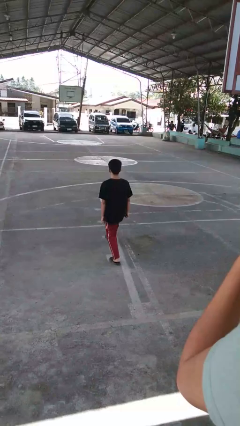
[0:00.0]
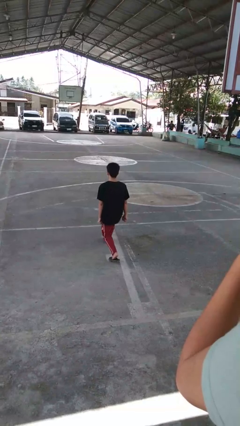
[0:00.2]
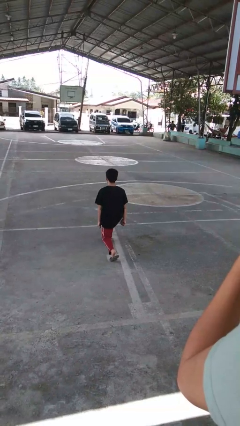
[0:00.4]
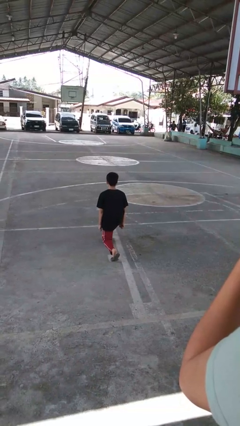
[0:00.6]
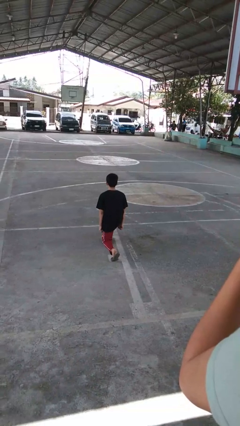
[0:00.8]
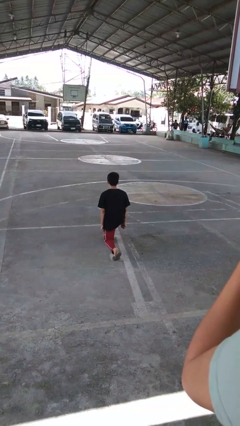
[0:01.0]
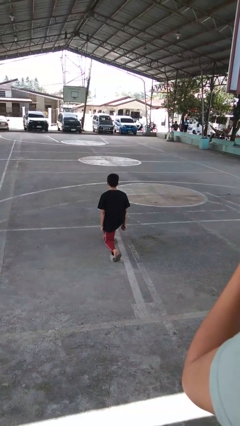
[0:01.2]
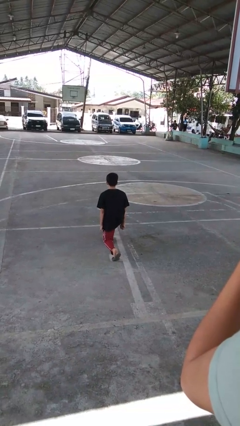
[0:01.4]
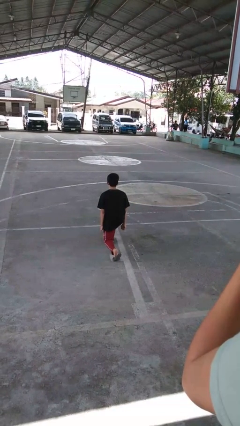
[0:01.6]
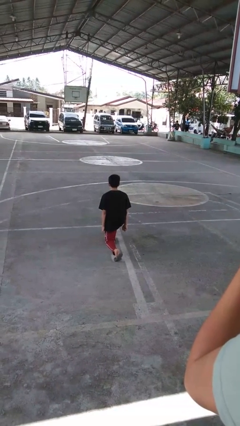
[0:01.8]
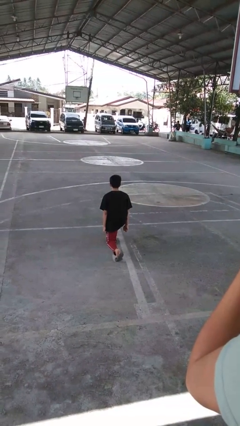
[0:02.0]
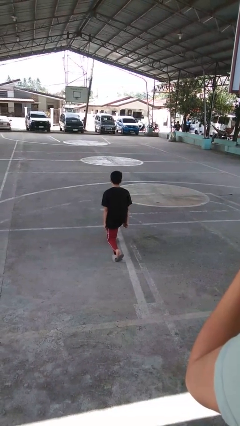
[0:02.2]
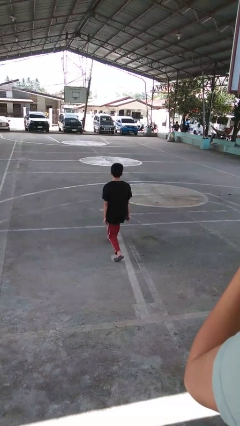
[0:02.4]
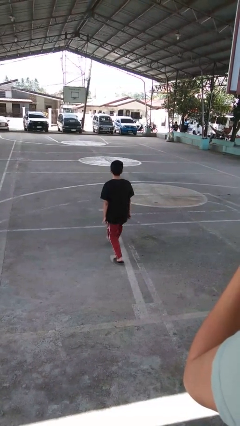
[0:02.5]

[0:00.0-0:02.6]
person exercises with lunges

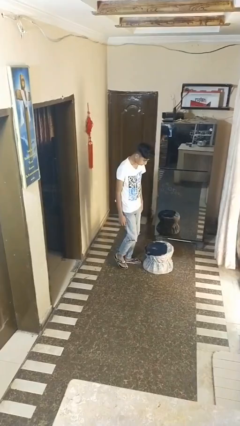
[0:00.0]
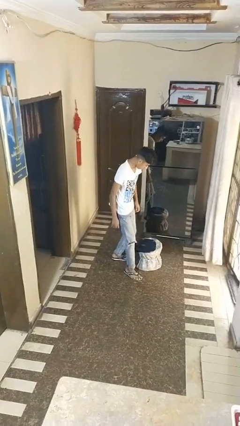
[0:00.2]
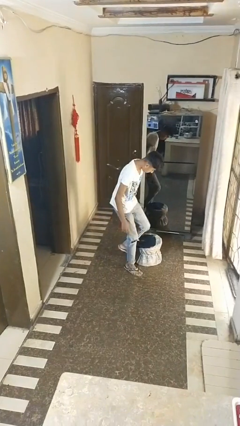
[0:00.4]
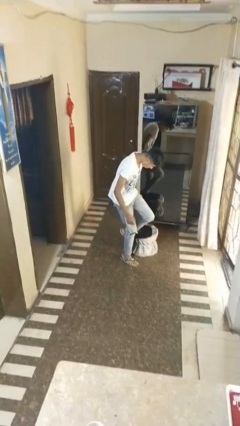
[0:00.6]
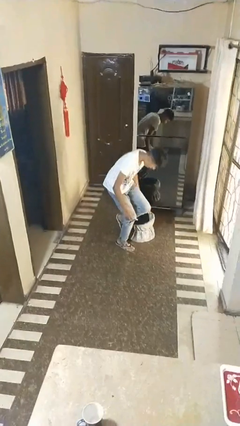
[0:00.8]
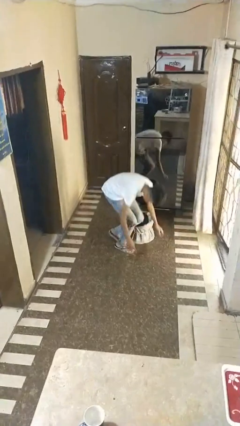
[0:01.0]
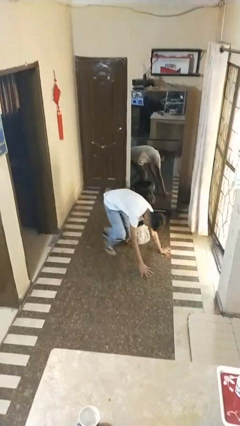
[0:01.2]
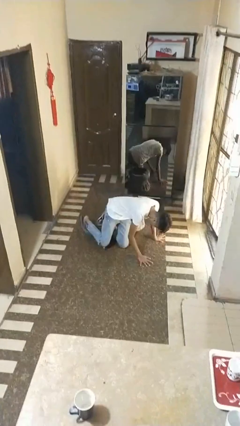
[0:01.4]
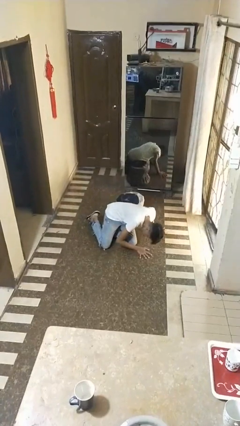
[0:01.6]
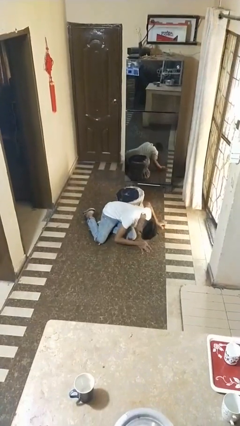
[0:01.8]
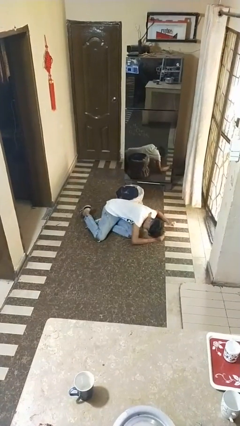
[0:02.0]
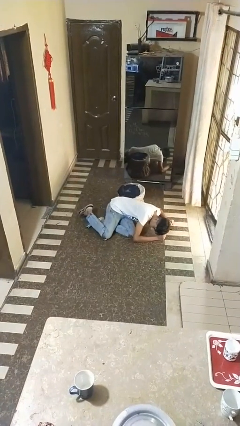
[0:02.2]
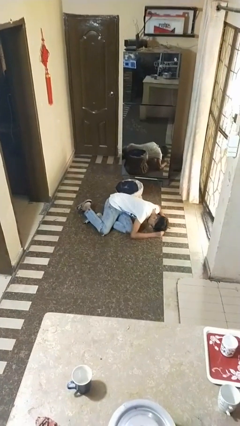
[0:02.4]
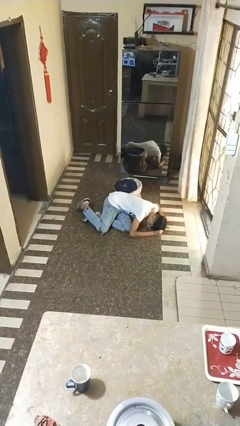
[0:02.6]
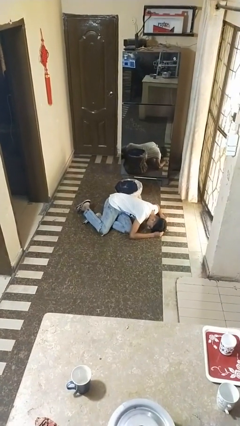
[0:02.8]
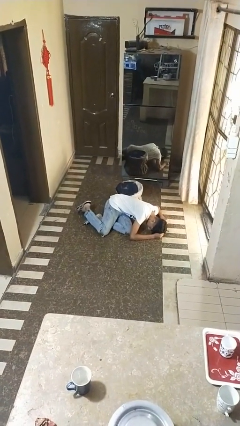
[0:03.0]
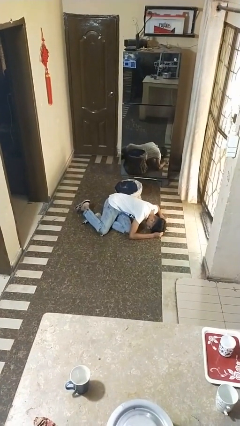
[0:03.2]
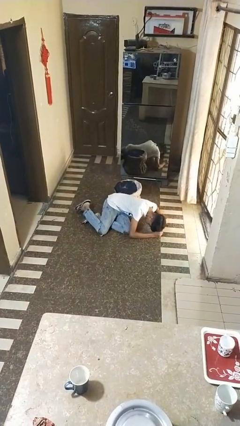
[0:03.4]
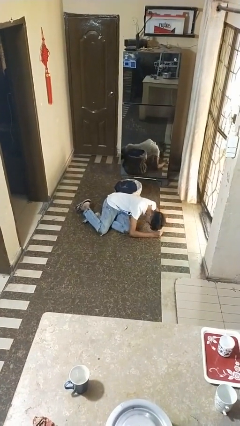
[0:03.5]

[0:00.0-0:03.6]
person lies down on floor

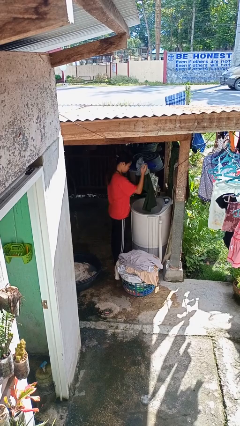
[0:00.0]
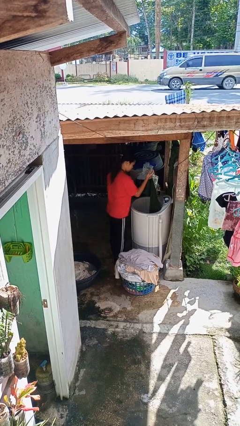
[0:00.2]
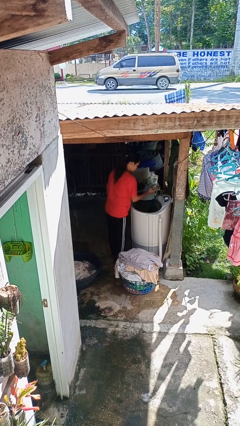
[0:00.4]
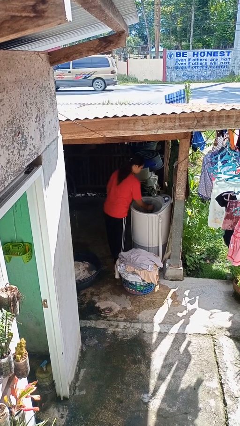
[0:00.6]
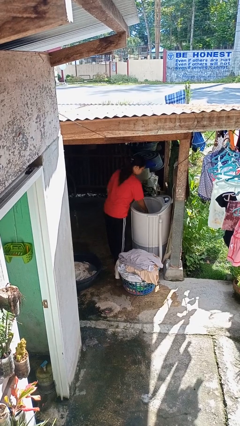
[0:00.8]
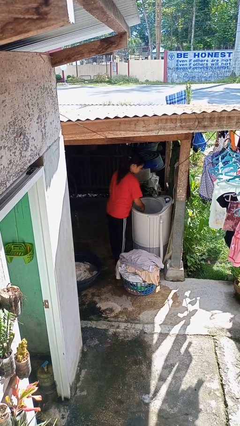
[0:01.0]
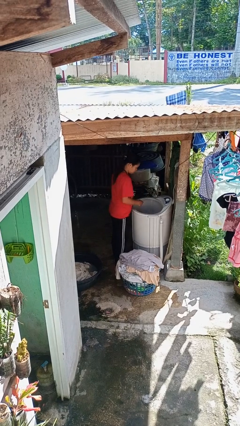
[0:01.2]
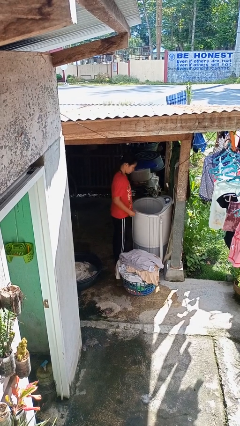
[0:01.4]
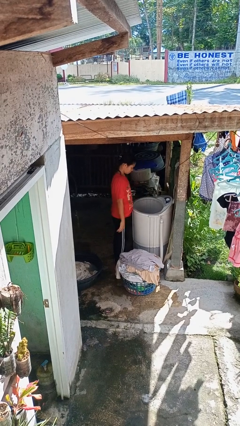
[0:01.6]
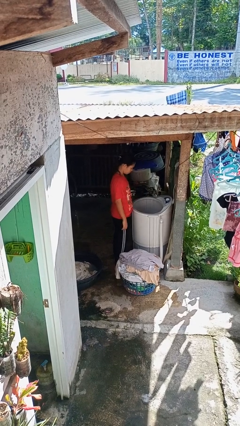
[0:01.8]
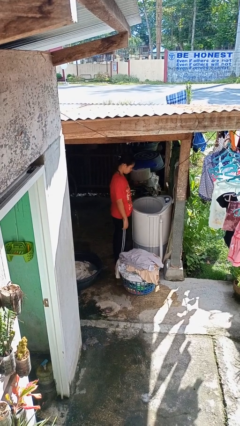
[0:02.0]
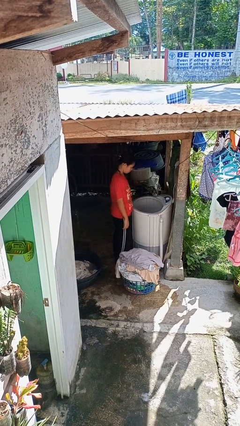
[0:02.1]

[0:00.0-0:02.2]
person loads clotheswasher

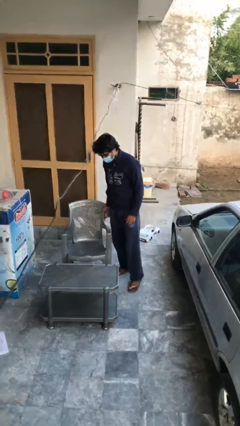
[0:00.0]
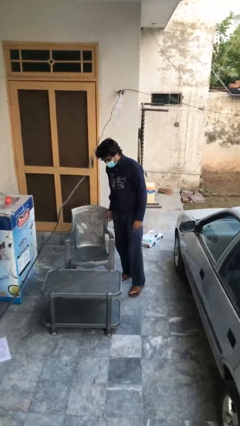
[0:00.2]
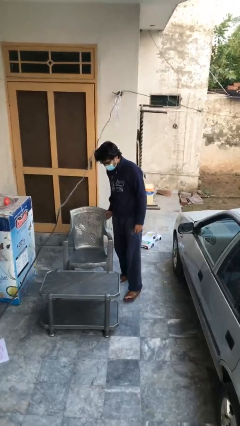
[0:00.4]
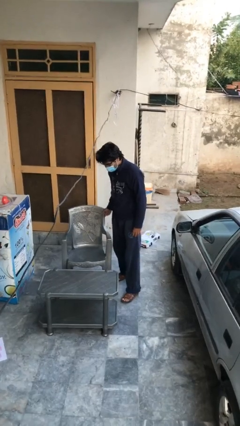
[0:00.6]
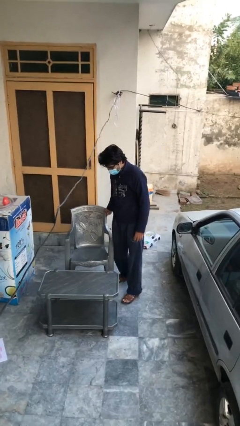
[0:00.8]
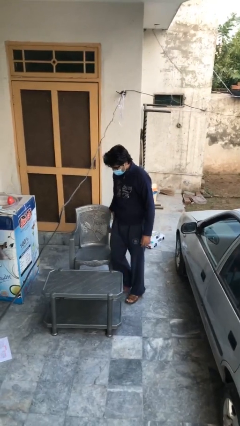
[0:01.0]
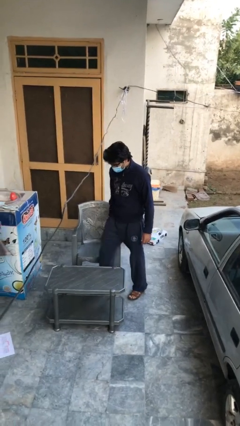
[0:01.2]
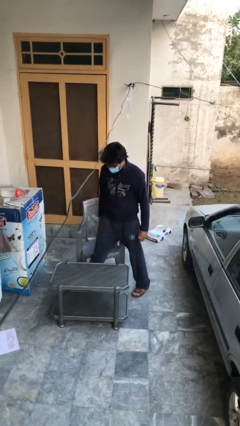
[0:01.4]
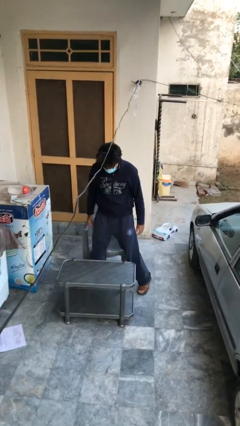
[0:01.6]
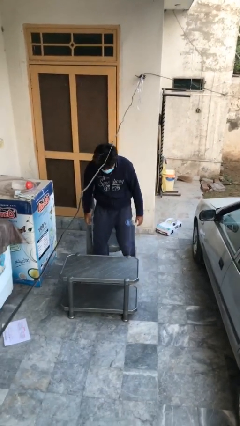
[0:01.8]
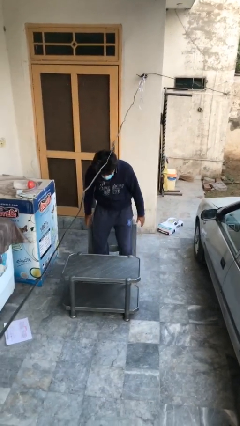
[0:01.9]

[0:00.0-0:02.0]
person sits down

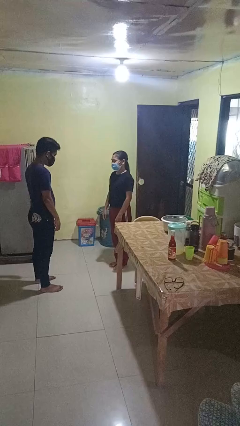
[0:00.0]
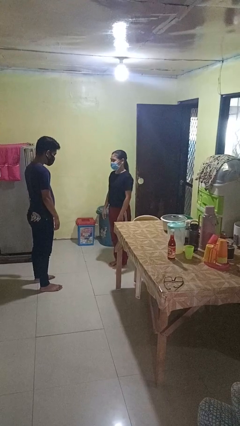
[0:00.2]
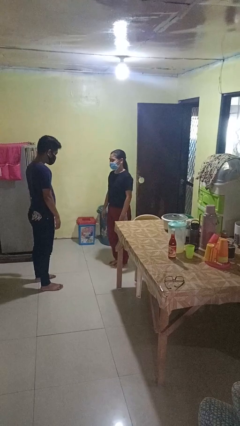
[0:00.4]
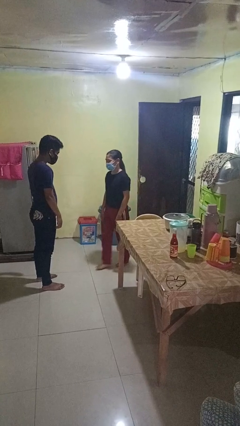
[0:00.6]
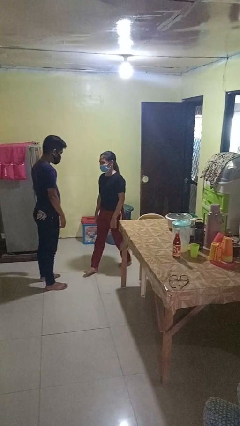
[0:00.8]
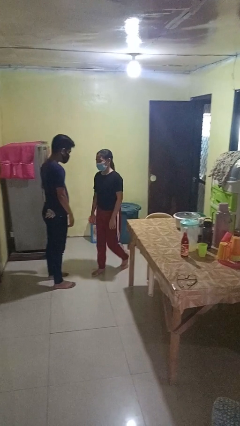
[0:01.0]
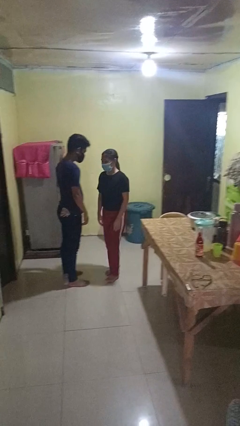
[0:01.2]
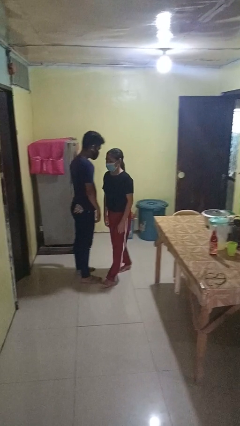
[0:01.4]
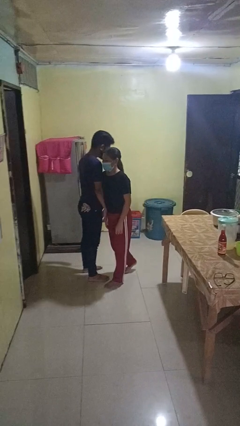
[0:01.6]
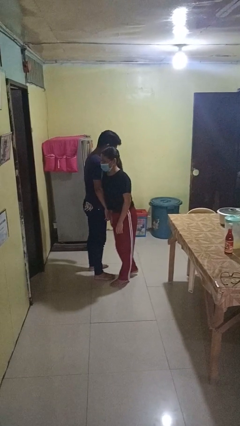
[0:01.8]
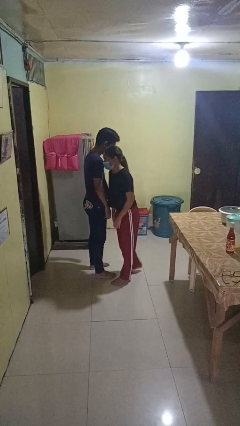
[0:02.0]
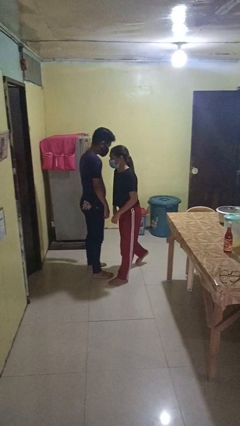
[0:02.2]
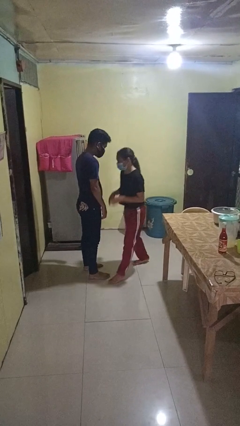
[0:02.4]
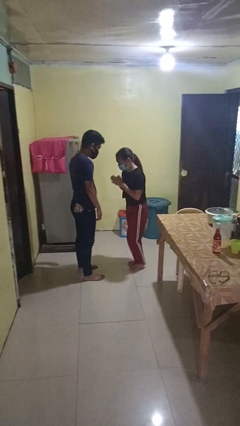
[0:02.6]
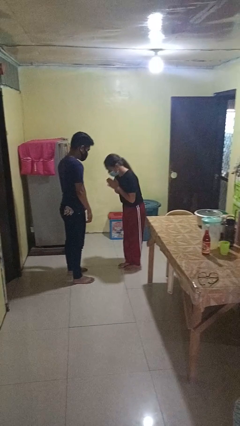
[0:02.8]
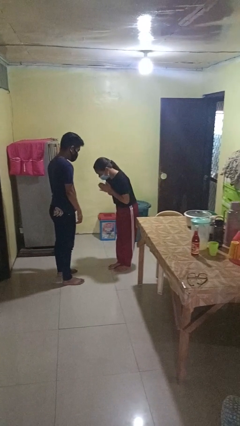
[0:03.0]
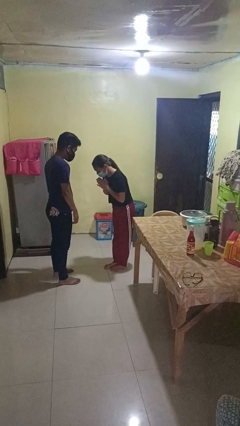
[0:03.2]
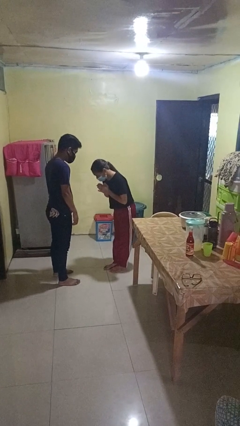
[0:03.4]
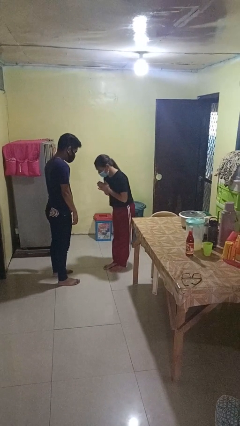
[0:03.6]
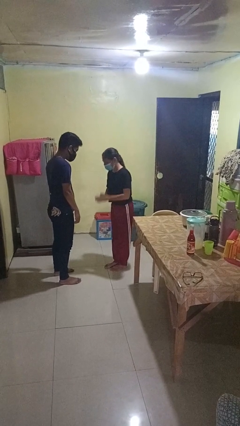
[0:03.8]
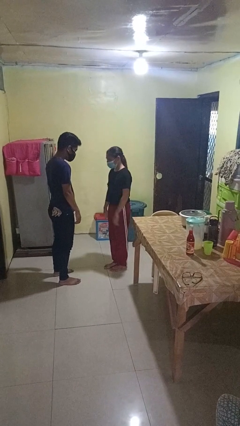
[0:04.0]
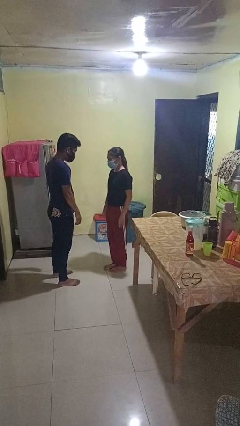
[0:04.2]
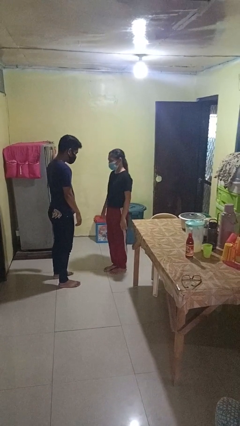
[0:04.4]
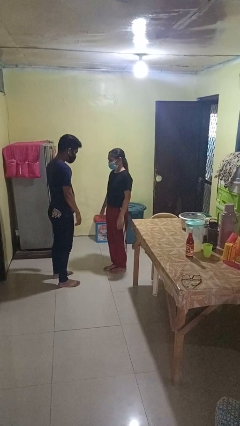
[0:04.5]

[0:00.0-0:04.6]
person bumps into person

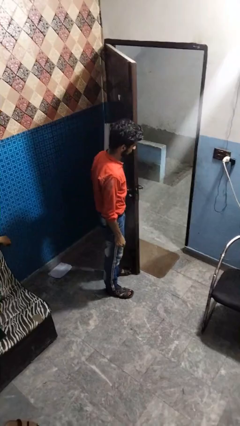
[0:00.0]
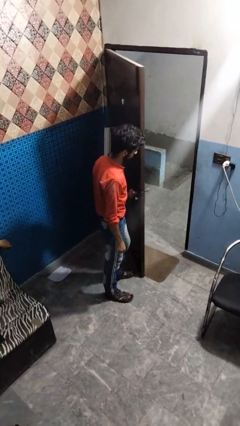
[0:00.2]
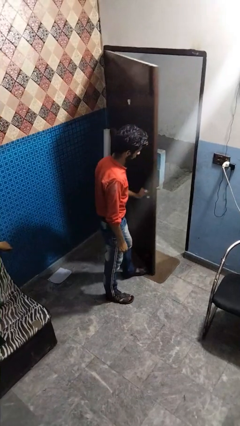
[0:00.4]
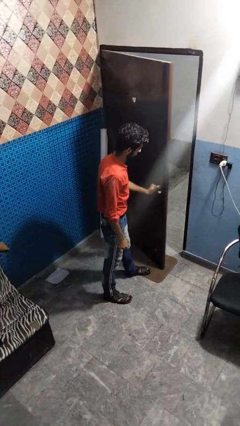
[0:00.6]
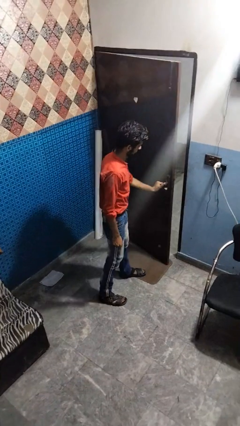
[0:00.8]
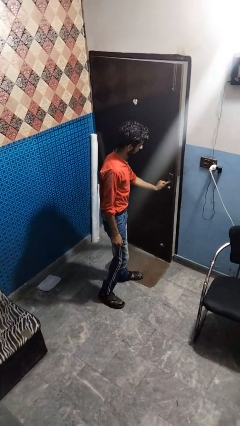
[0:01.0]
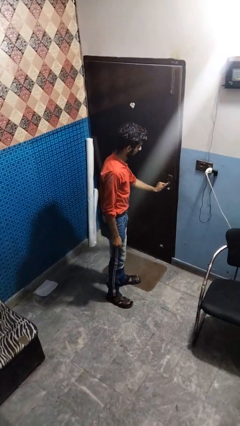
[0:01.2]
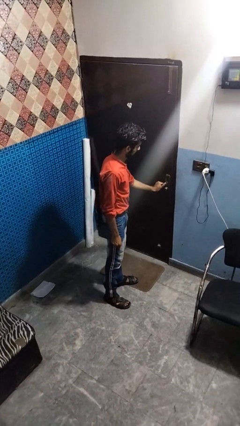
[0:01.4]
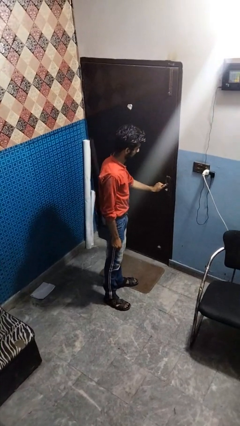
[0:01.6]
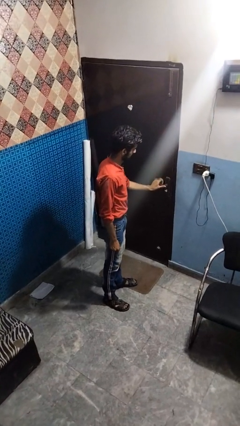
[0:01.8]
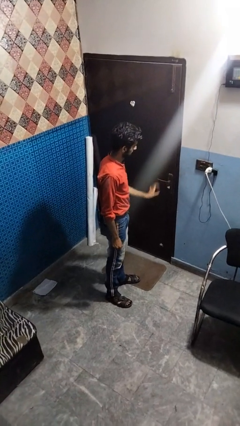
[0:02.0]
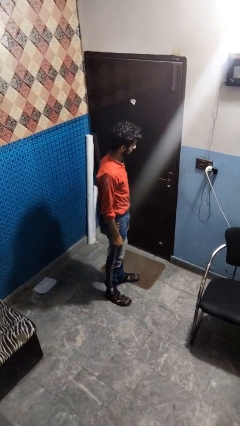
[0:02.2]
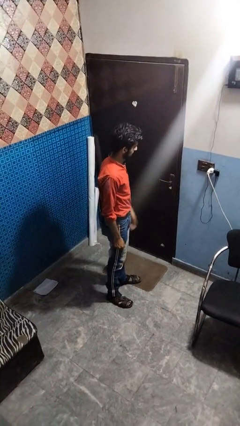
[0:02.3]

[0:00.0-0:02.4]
person closes facility door

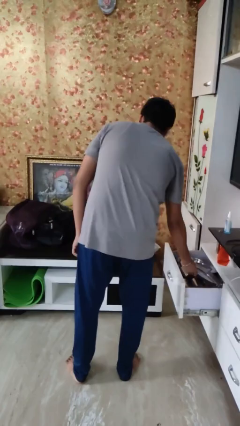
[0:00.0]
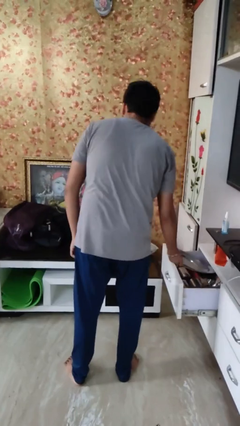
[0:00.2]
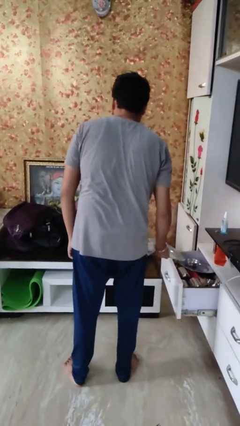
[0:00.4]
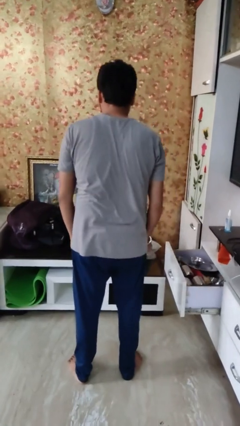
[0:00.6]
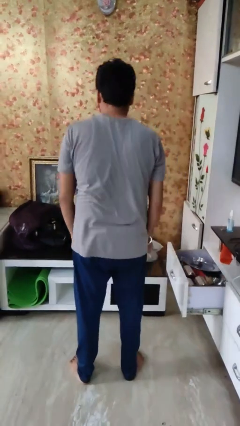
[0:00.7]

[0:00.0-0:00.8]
person takes object from kitchen drawer
